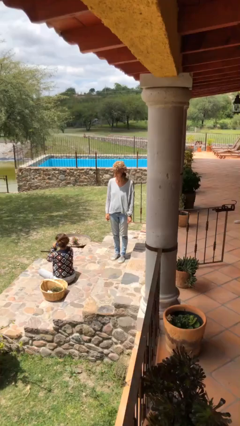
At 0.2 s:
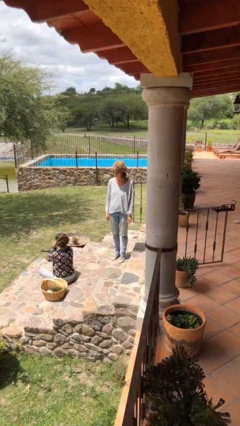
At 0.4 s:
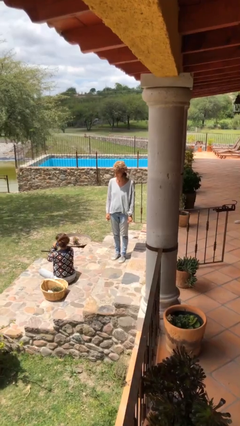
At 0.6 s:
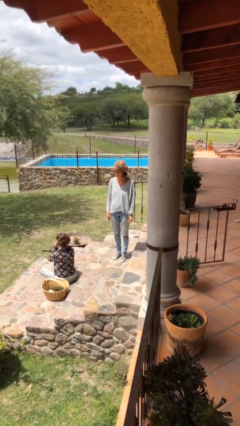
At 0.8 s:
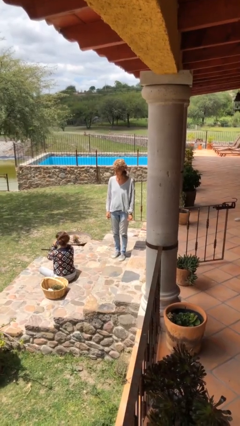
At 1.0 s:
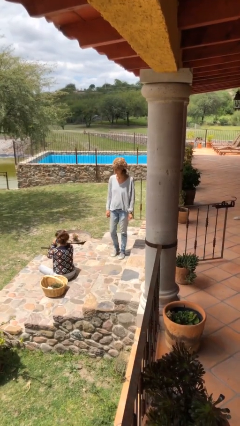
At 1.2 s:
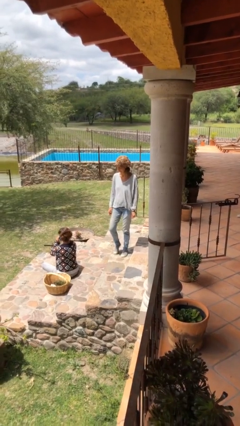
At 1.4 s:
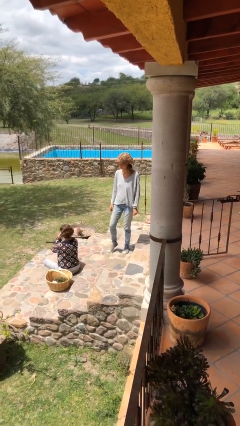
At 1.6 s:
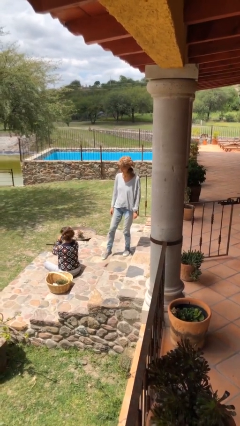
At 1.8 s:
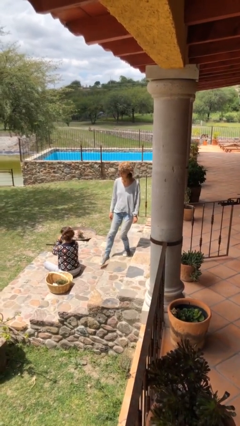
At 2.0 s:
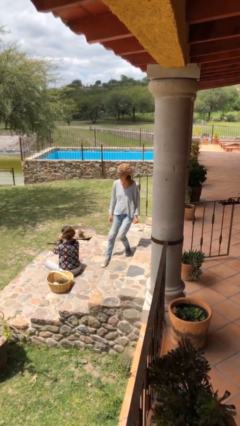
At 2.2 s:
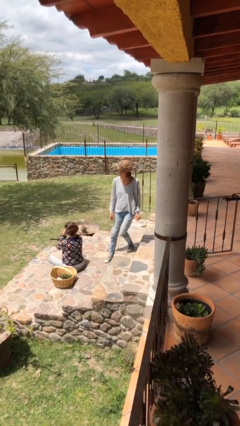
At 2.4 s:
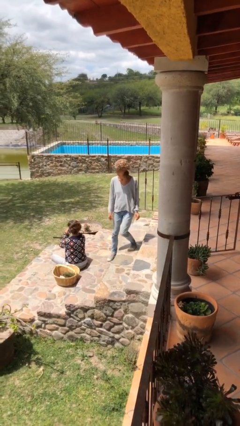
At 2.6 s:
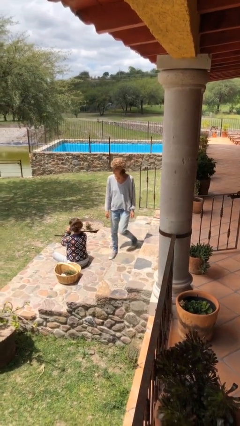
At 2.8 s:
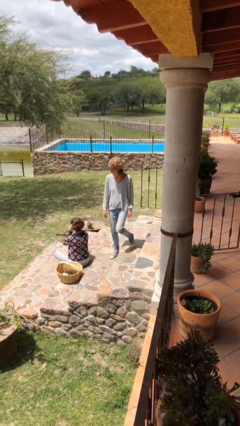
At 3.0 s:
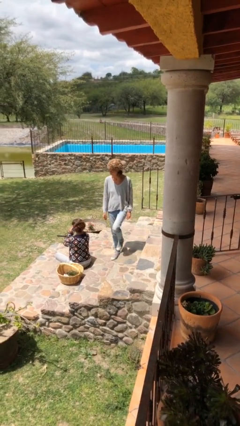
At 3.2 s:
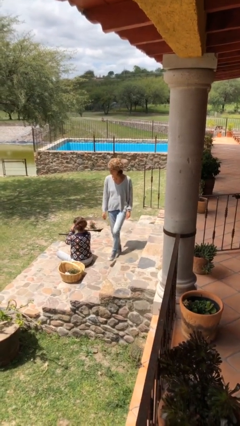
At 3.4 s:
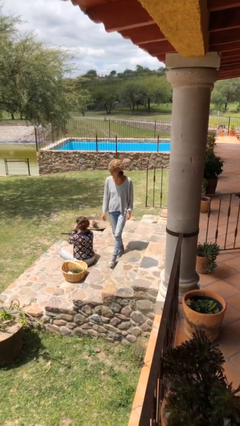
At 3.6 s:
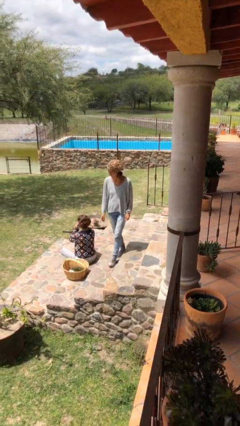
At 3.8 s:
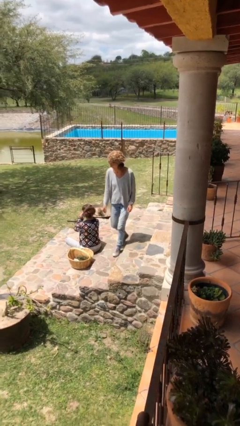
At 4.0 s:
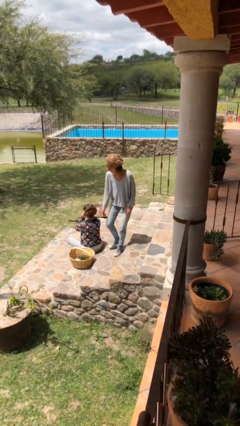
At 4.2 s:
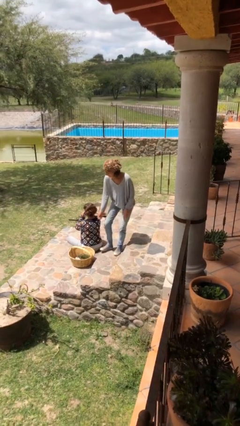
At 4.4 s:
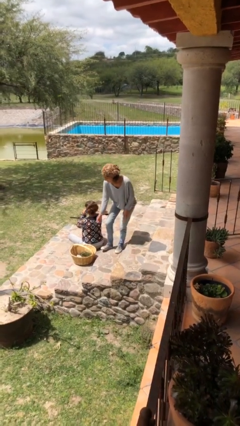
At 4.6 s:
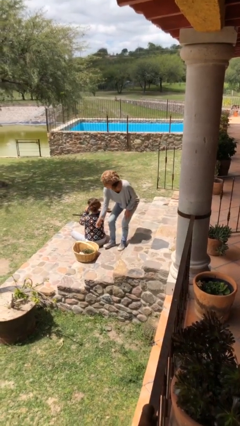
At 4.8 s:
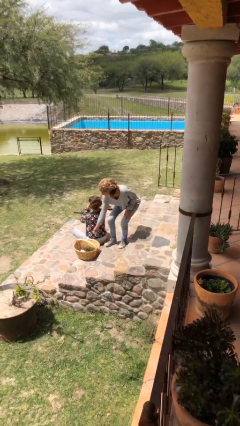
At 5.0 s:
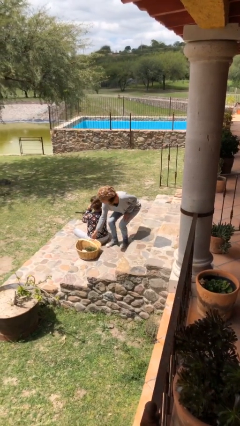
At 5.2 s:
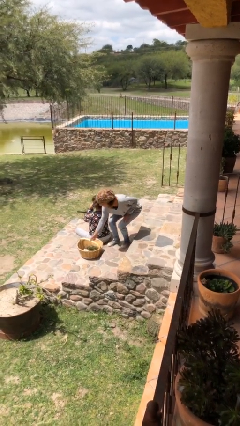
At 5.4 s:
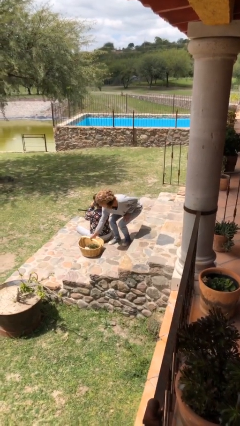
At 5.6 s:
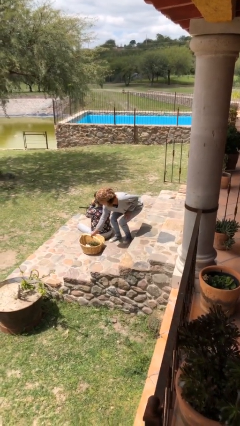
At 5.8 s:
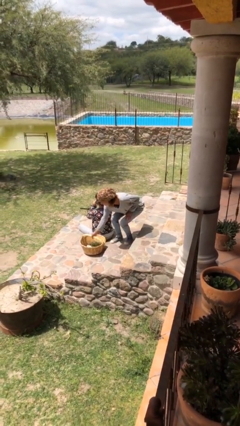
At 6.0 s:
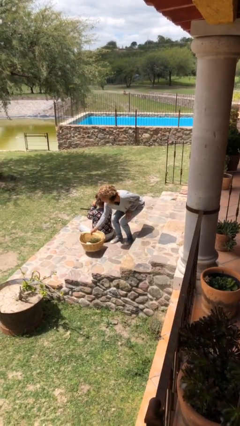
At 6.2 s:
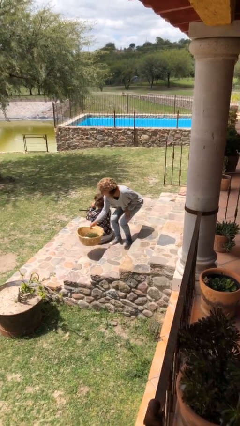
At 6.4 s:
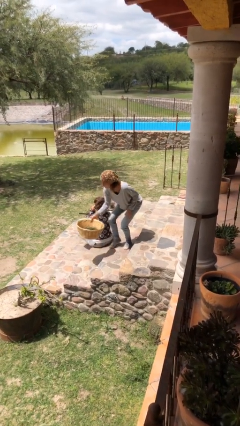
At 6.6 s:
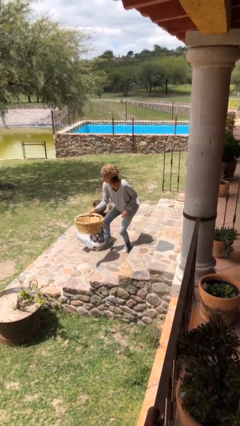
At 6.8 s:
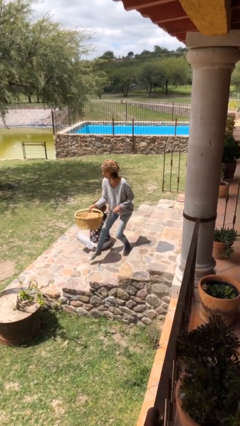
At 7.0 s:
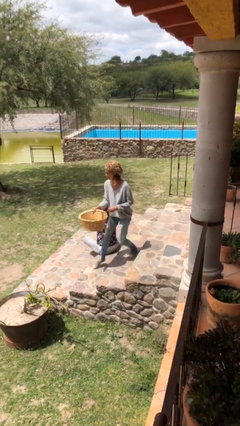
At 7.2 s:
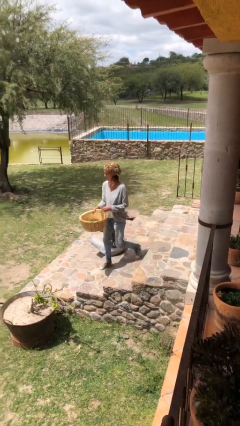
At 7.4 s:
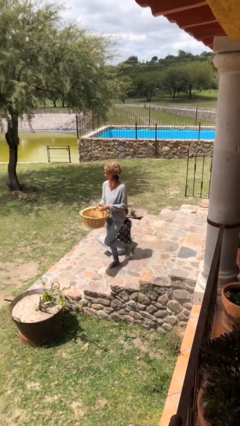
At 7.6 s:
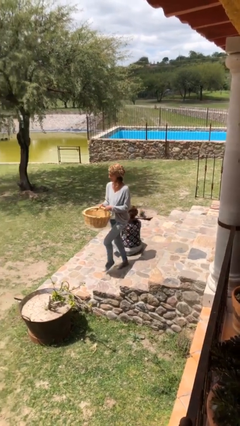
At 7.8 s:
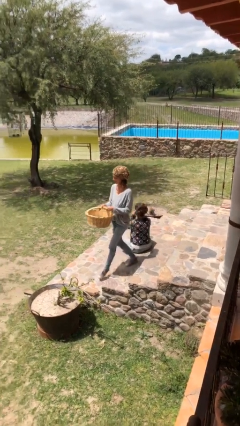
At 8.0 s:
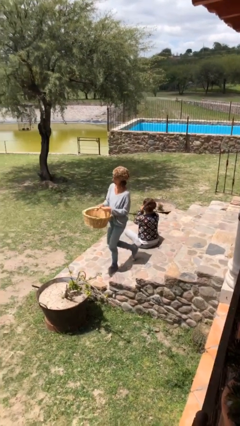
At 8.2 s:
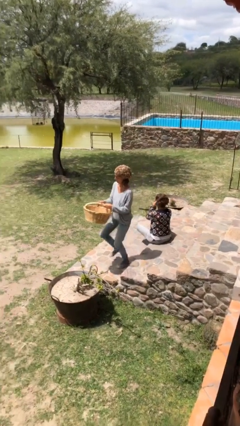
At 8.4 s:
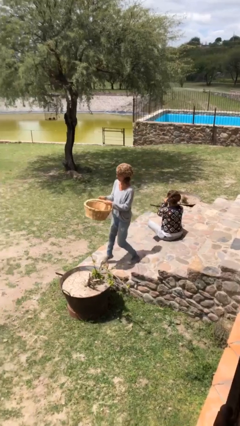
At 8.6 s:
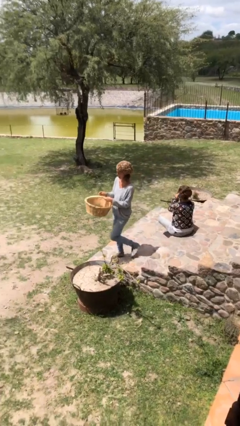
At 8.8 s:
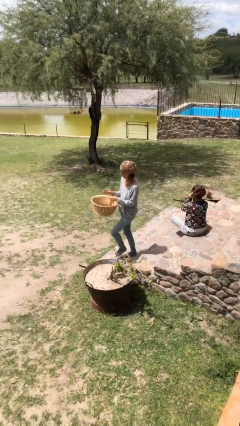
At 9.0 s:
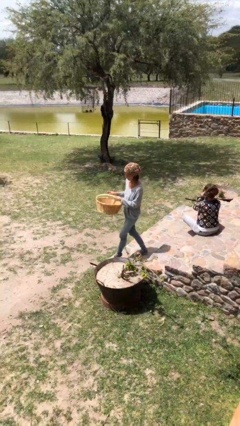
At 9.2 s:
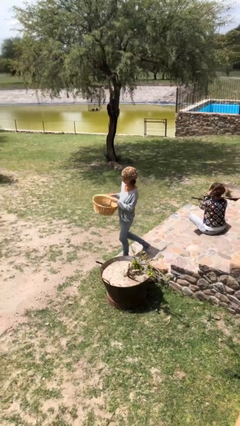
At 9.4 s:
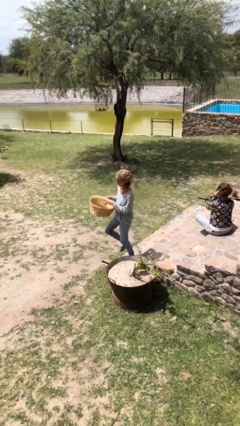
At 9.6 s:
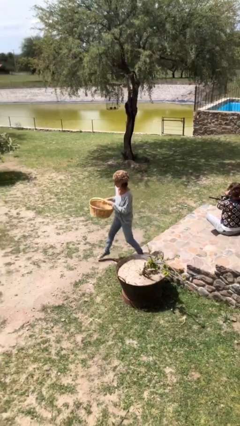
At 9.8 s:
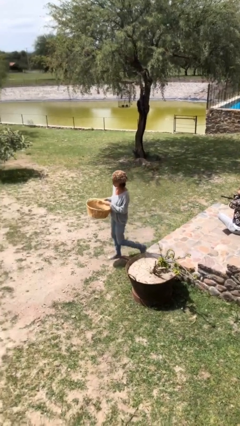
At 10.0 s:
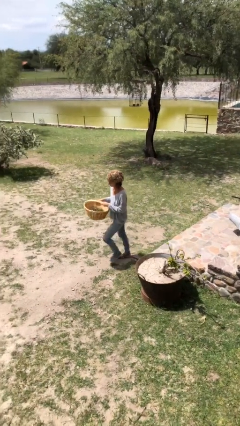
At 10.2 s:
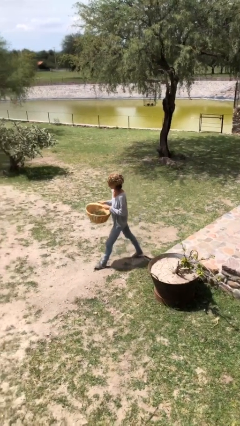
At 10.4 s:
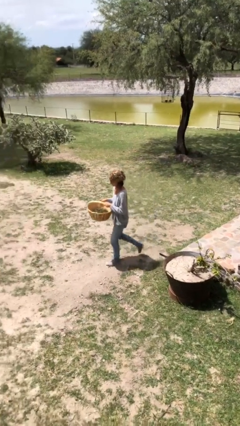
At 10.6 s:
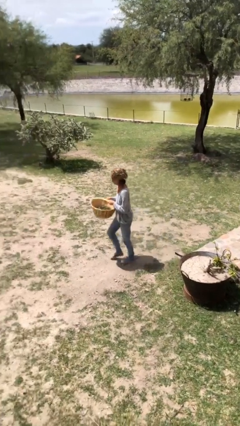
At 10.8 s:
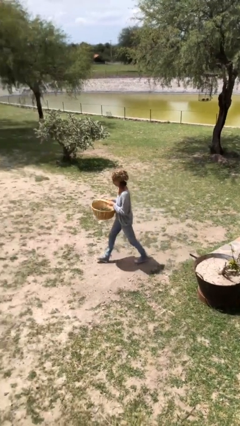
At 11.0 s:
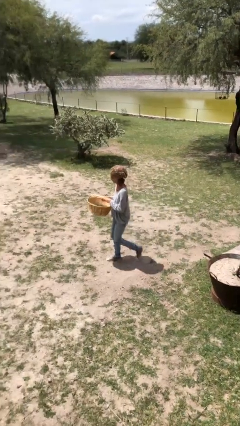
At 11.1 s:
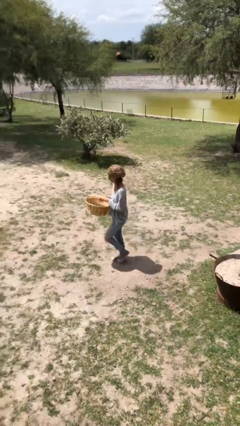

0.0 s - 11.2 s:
person steals object from person

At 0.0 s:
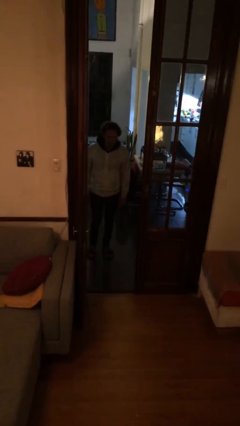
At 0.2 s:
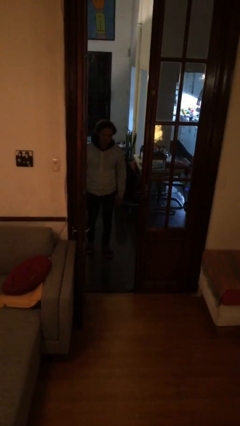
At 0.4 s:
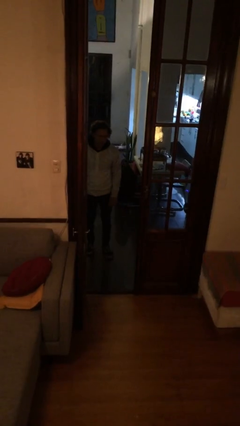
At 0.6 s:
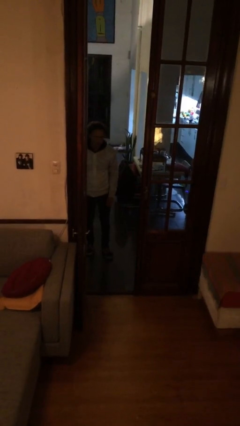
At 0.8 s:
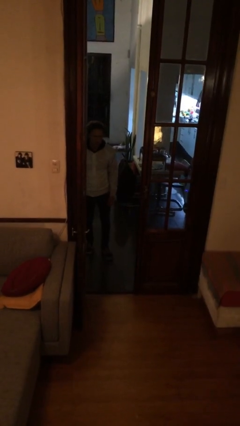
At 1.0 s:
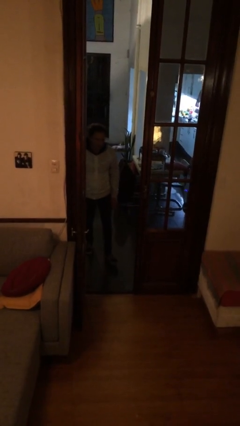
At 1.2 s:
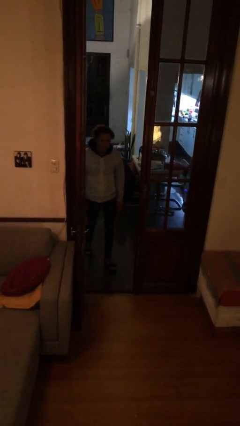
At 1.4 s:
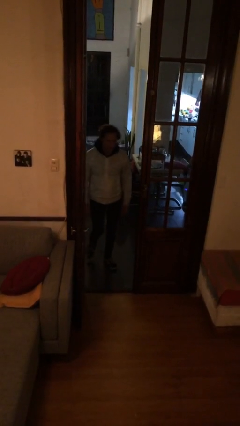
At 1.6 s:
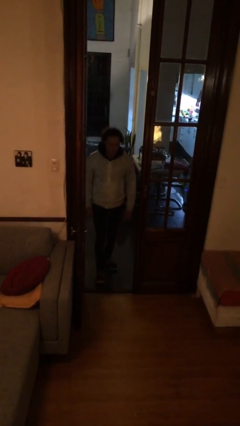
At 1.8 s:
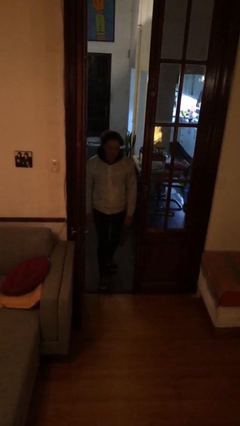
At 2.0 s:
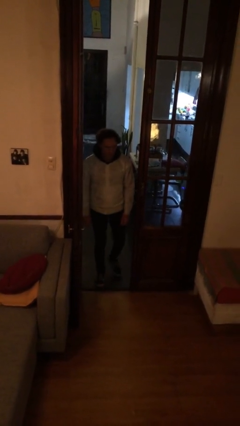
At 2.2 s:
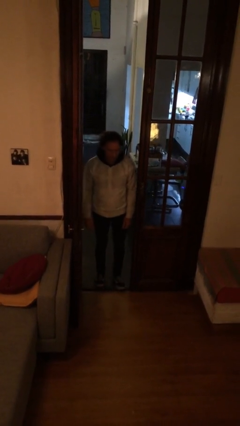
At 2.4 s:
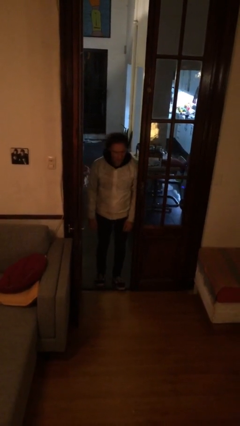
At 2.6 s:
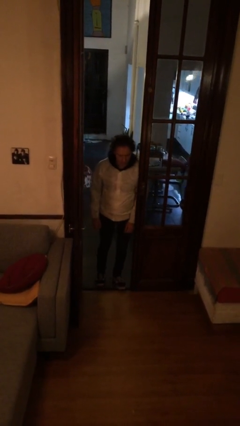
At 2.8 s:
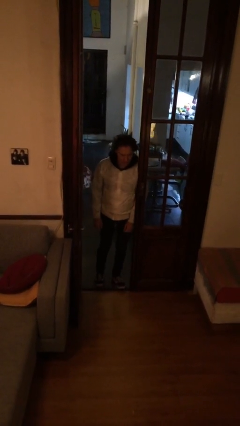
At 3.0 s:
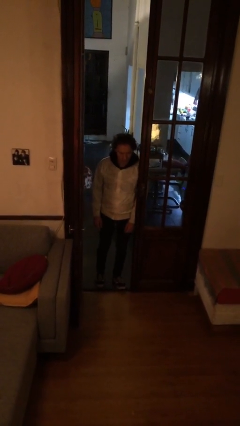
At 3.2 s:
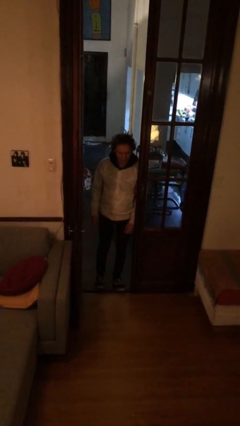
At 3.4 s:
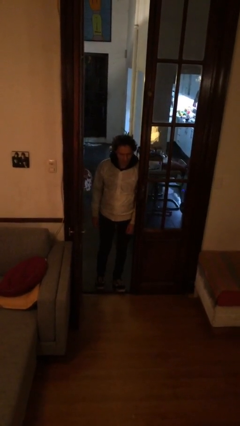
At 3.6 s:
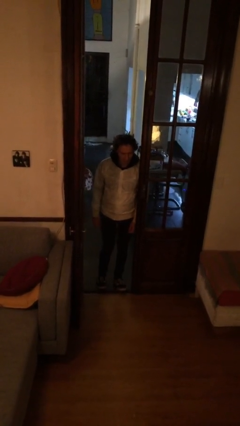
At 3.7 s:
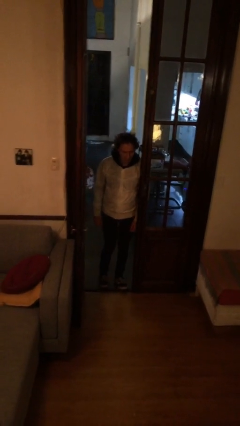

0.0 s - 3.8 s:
person bumps into wall

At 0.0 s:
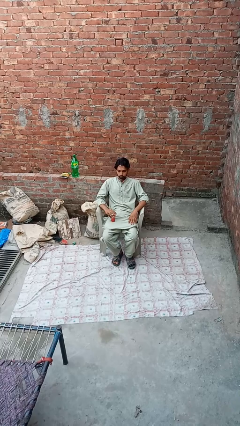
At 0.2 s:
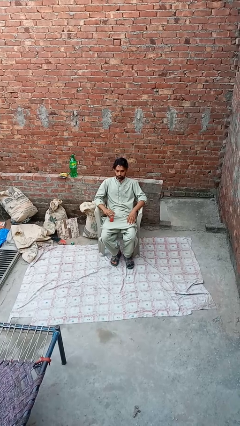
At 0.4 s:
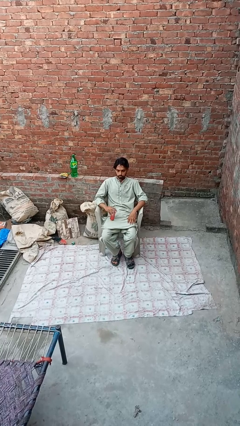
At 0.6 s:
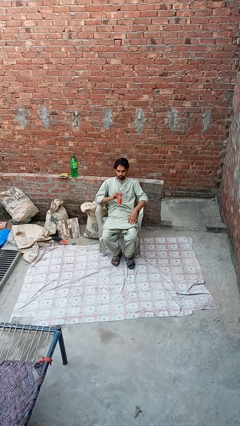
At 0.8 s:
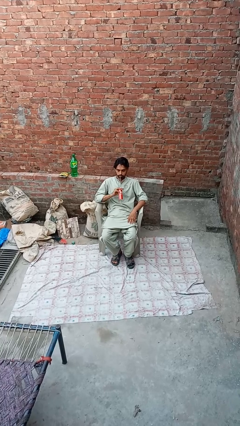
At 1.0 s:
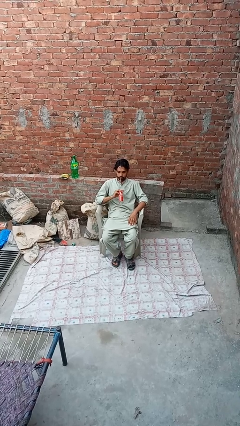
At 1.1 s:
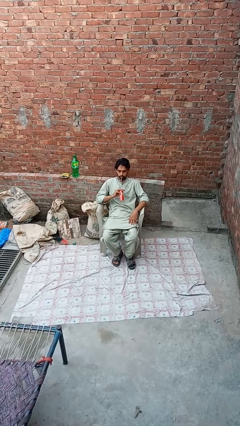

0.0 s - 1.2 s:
person drinks from straw

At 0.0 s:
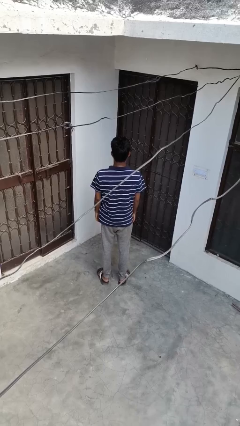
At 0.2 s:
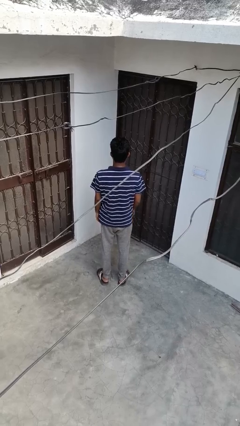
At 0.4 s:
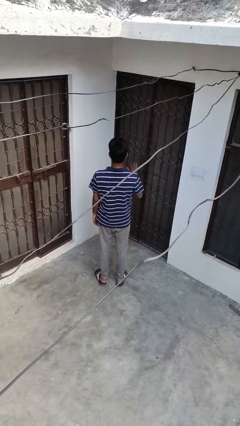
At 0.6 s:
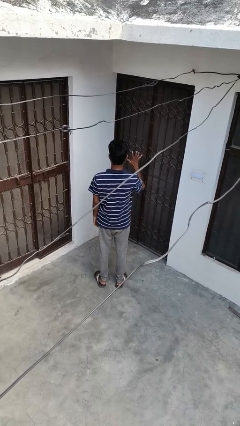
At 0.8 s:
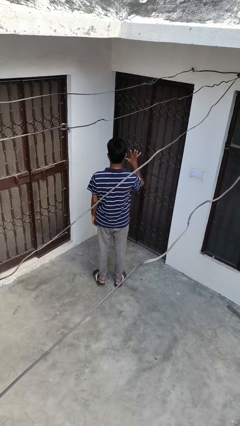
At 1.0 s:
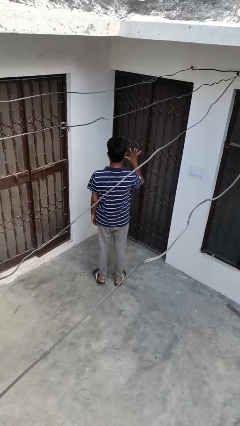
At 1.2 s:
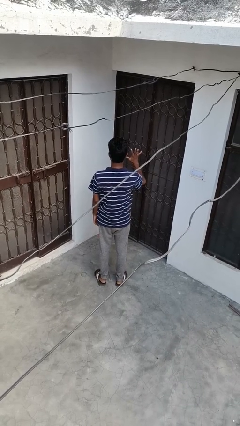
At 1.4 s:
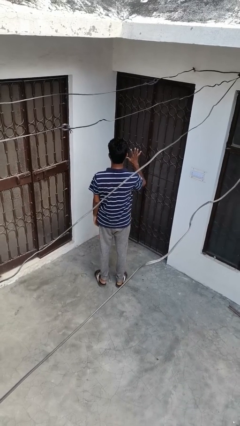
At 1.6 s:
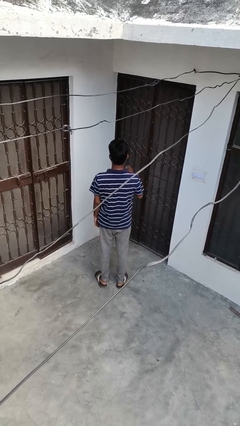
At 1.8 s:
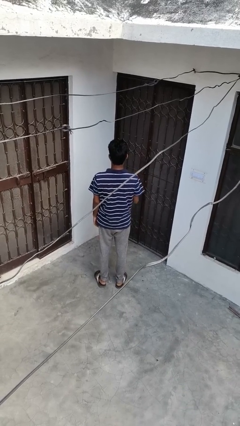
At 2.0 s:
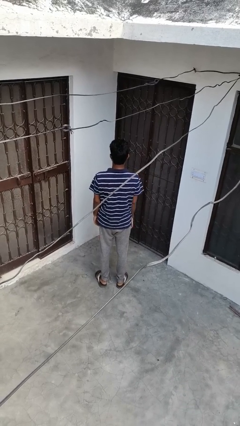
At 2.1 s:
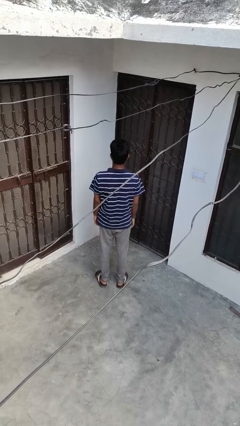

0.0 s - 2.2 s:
person gestures number five
